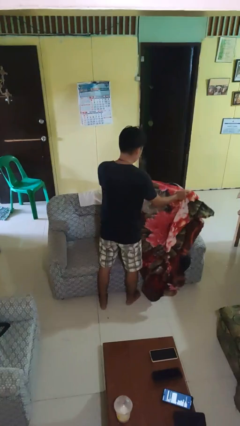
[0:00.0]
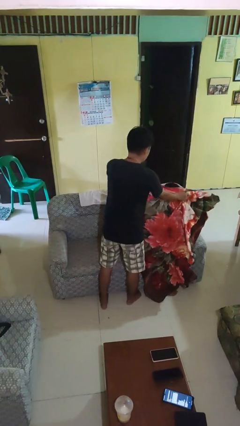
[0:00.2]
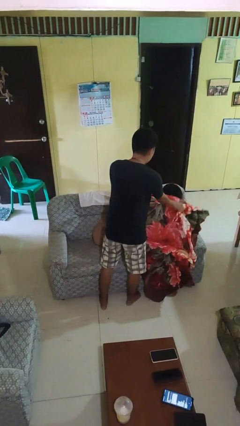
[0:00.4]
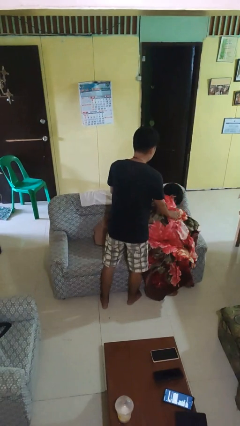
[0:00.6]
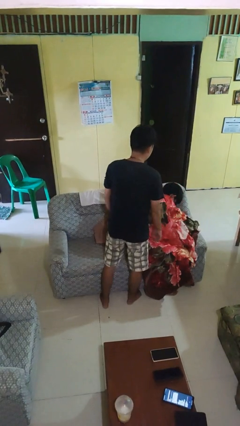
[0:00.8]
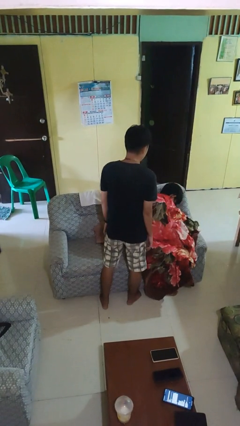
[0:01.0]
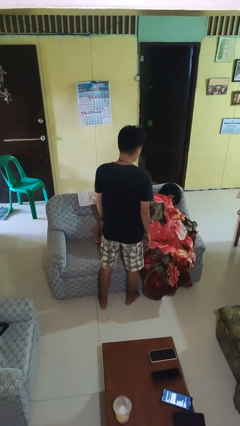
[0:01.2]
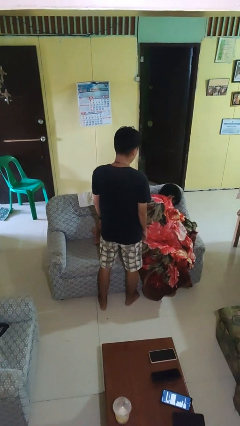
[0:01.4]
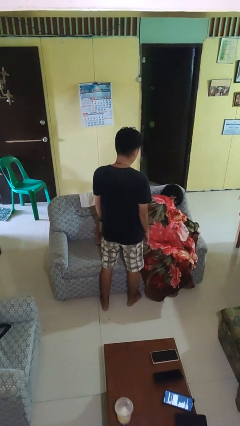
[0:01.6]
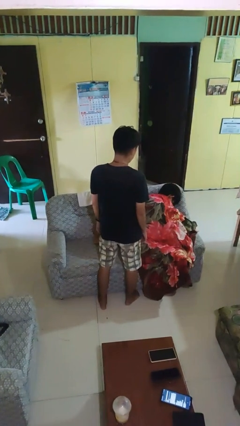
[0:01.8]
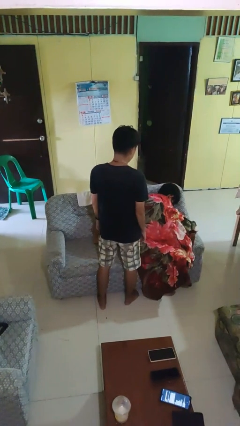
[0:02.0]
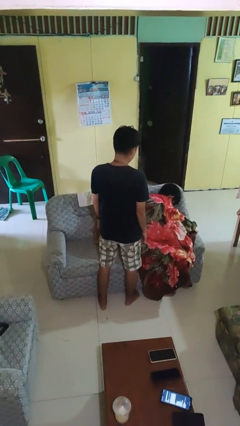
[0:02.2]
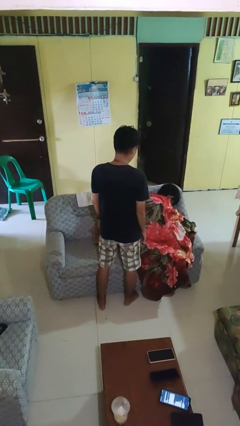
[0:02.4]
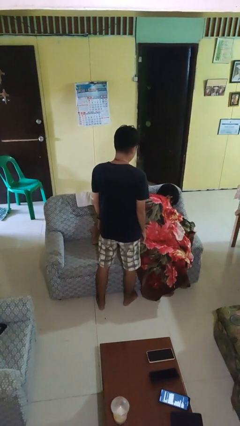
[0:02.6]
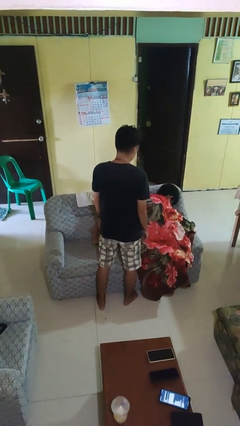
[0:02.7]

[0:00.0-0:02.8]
person covers friend with blanket

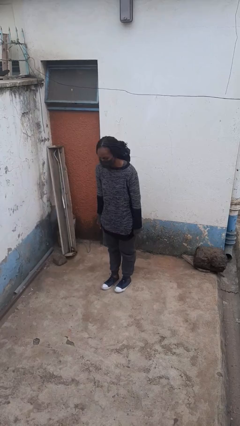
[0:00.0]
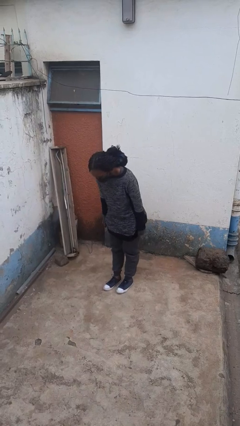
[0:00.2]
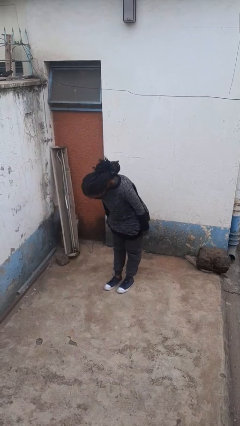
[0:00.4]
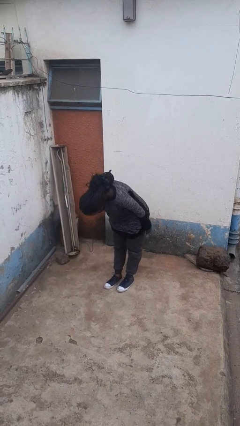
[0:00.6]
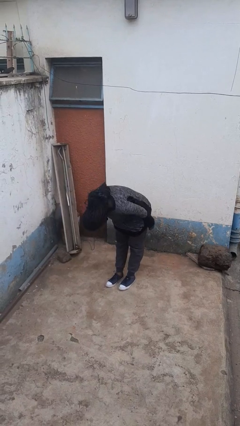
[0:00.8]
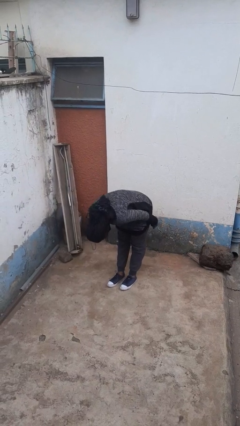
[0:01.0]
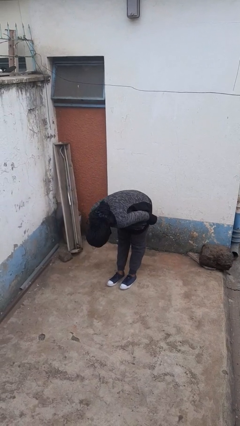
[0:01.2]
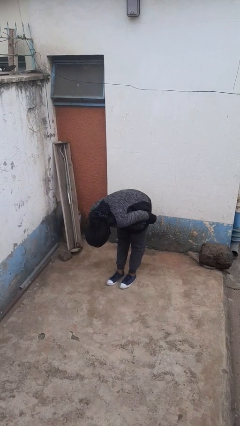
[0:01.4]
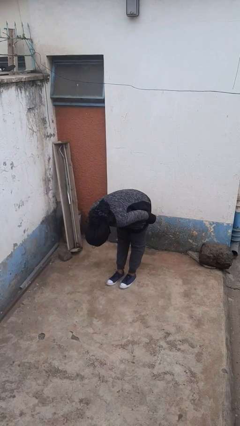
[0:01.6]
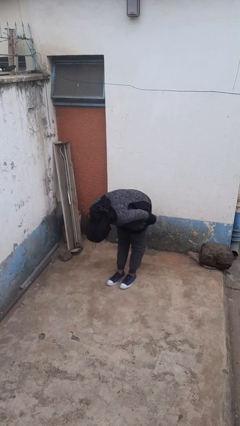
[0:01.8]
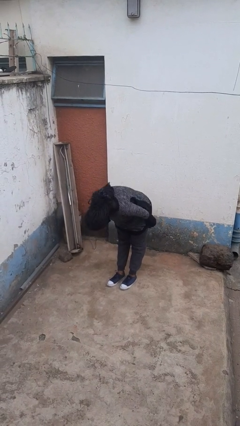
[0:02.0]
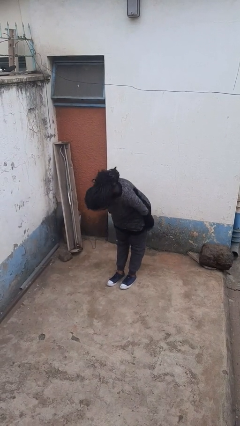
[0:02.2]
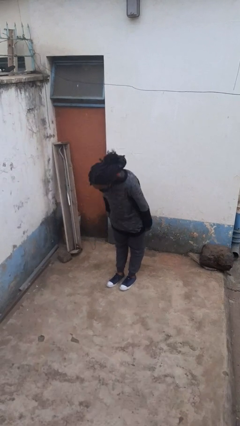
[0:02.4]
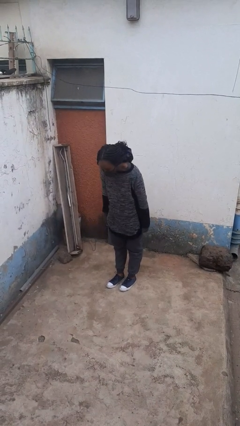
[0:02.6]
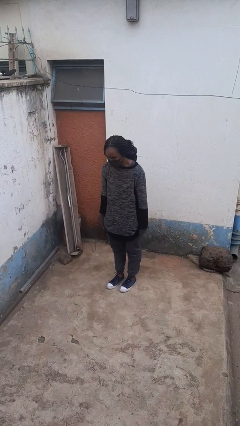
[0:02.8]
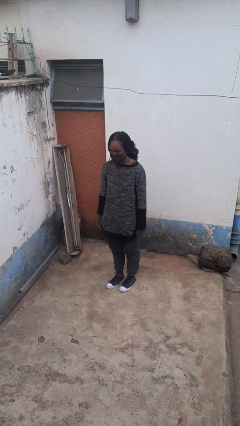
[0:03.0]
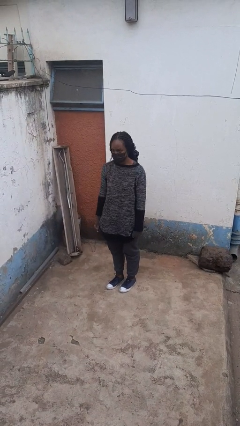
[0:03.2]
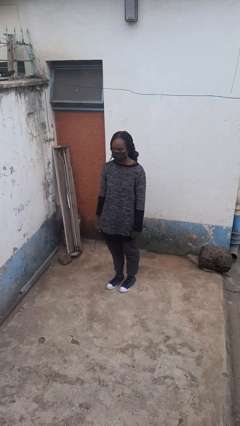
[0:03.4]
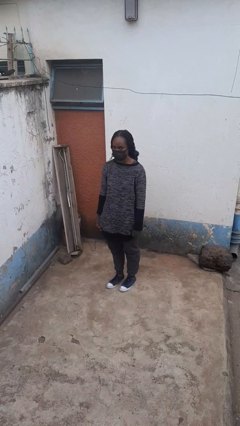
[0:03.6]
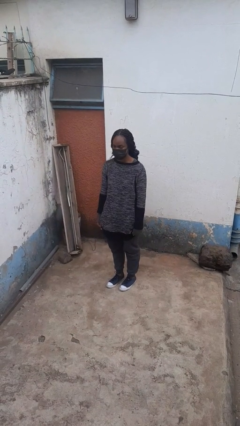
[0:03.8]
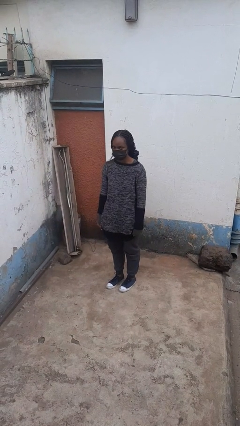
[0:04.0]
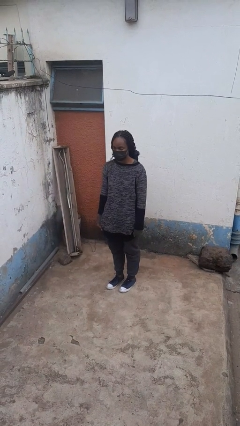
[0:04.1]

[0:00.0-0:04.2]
person bows

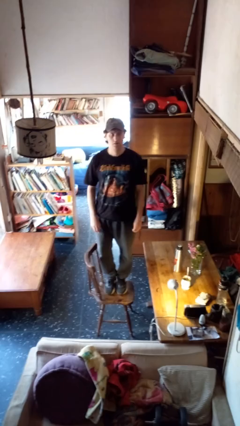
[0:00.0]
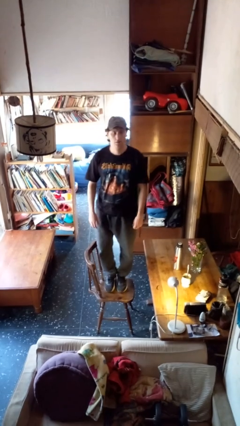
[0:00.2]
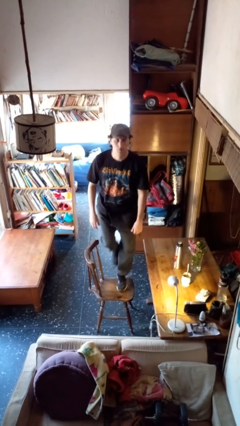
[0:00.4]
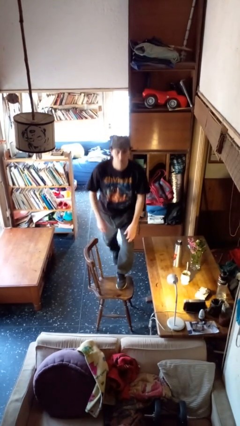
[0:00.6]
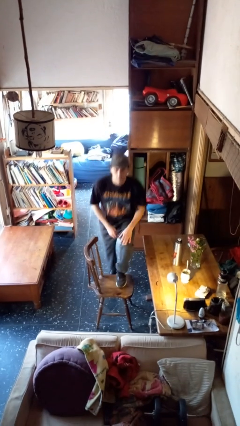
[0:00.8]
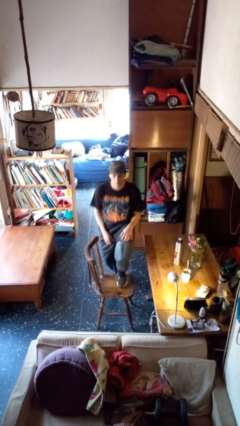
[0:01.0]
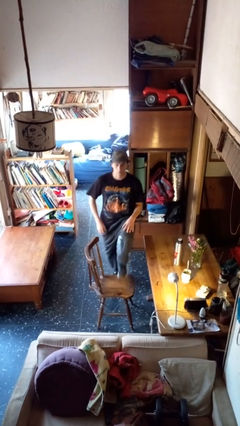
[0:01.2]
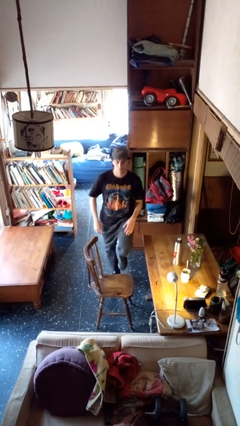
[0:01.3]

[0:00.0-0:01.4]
person climbs off chair

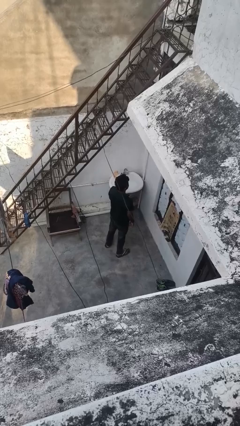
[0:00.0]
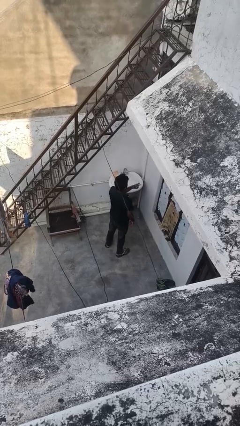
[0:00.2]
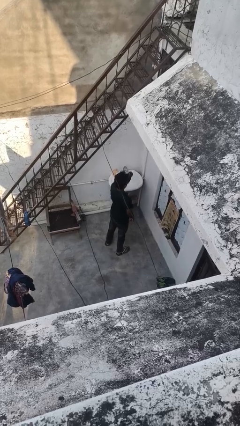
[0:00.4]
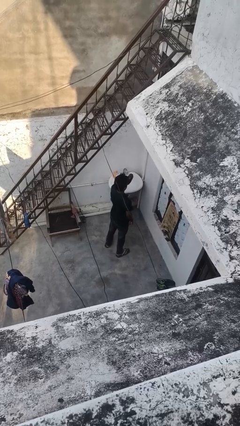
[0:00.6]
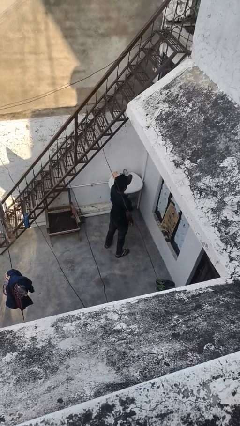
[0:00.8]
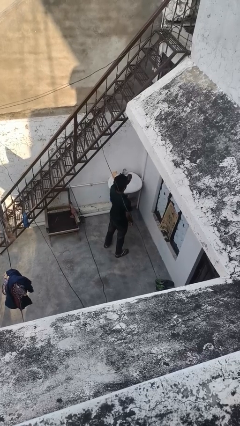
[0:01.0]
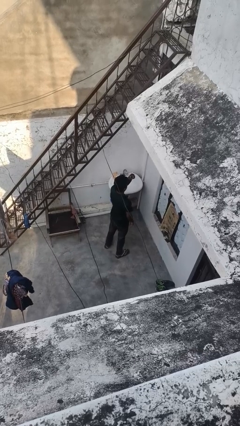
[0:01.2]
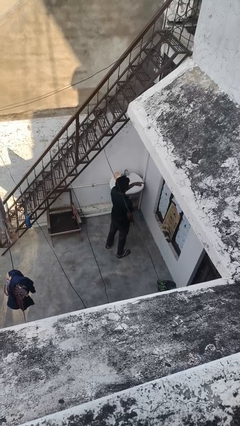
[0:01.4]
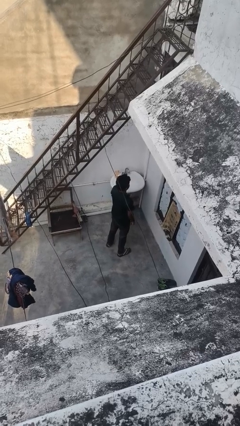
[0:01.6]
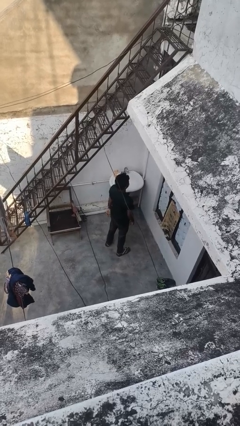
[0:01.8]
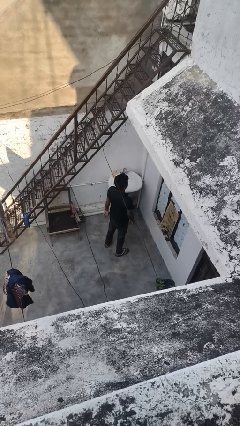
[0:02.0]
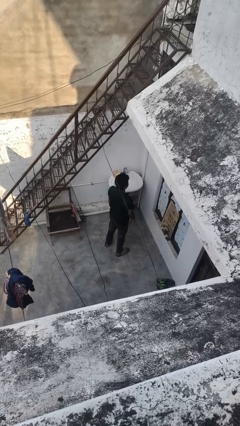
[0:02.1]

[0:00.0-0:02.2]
person gestures watch closely

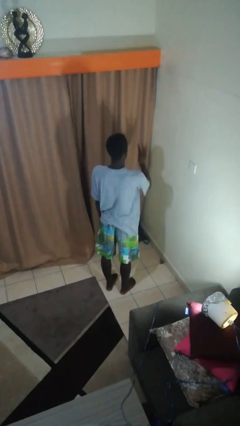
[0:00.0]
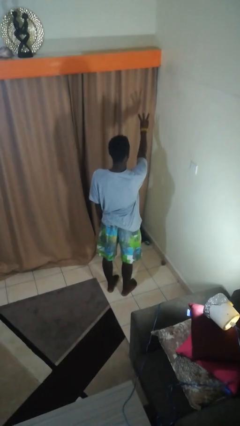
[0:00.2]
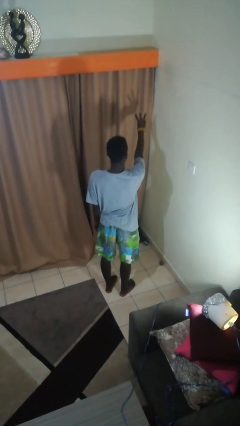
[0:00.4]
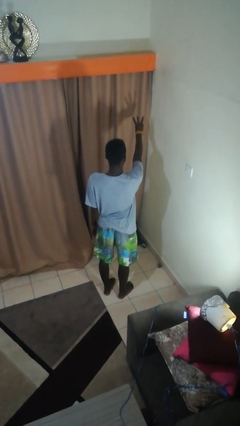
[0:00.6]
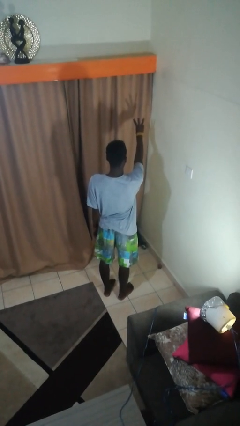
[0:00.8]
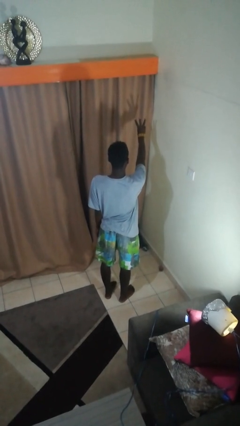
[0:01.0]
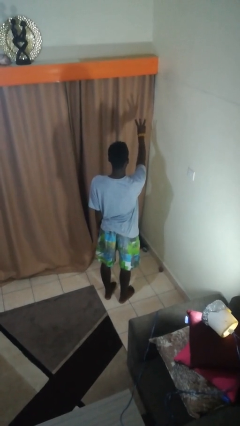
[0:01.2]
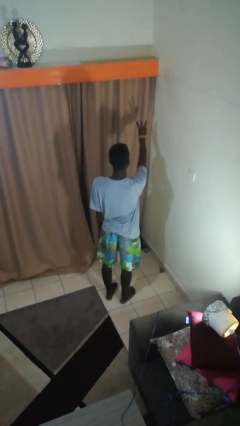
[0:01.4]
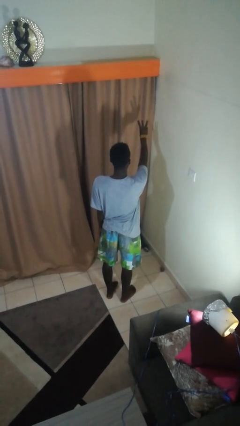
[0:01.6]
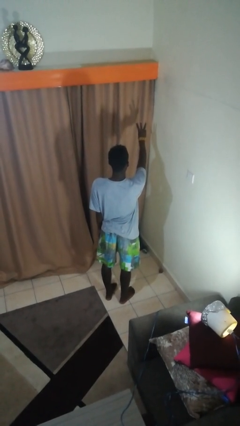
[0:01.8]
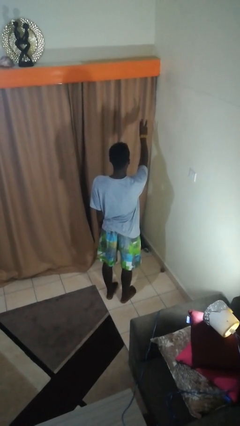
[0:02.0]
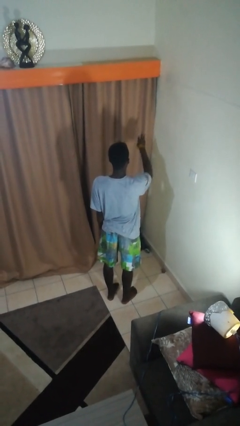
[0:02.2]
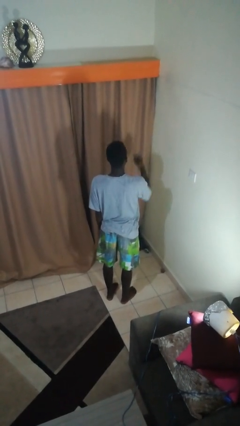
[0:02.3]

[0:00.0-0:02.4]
person gestures number three

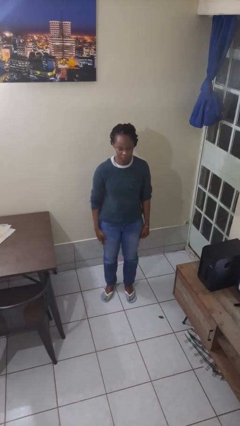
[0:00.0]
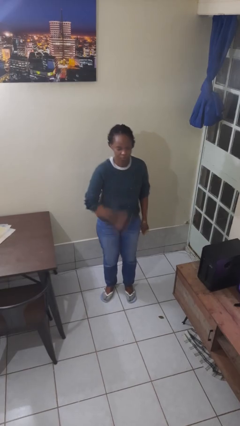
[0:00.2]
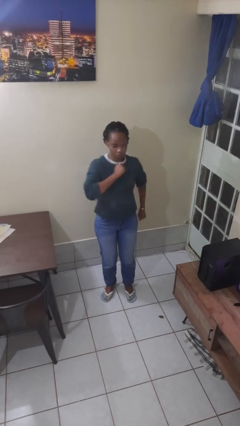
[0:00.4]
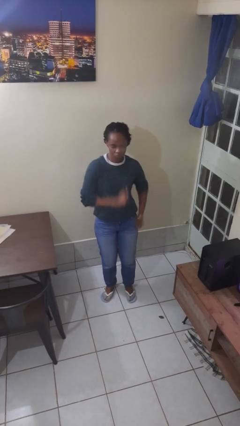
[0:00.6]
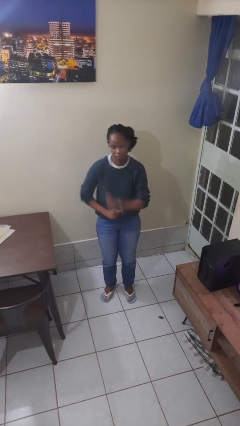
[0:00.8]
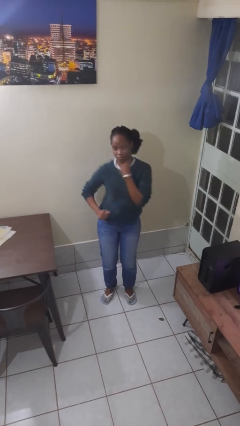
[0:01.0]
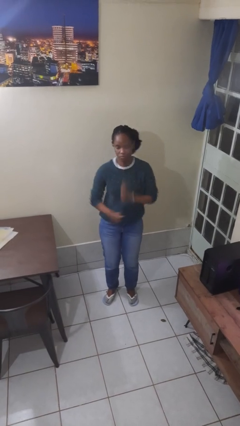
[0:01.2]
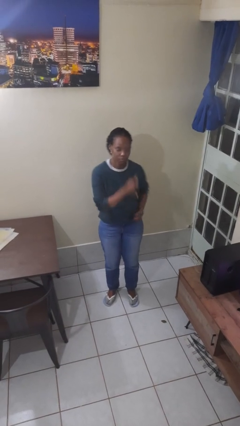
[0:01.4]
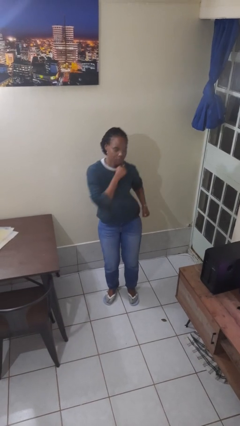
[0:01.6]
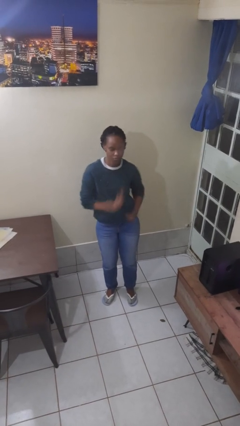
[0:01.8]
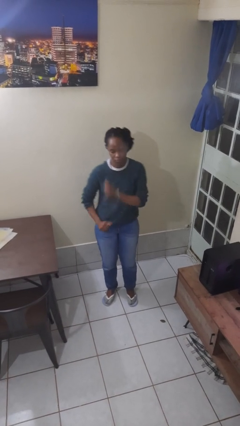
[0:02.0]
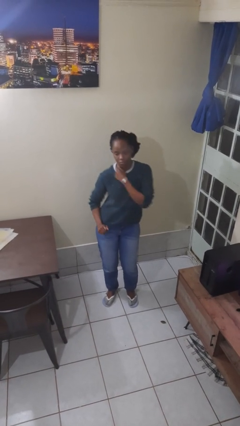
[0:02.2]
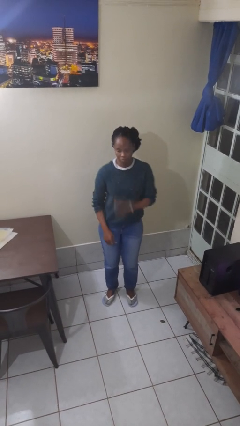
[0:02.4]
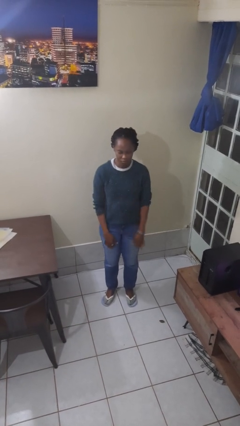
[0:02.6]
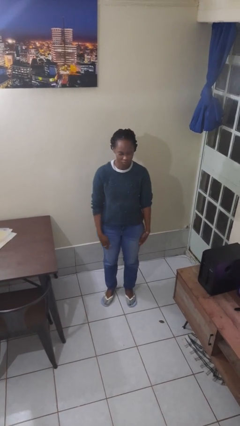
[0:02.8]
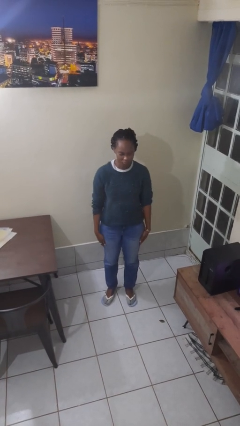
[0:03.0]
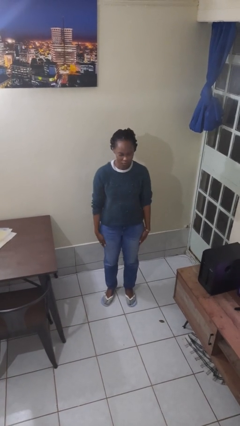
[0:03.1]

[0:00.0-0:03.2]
person dances in place

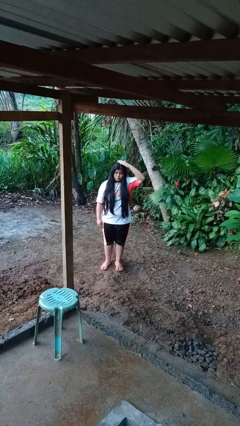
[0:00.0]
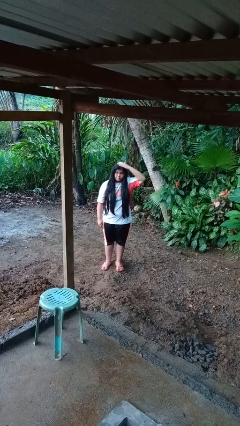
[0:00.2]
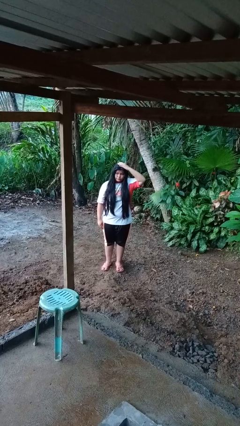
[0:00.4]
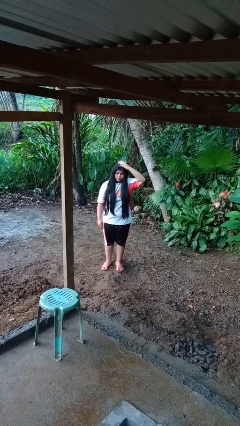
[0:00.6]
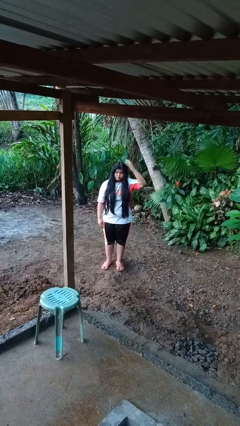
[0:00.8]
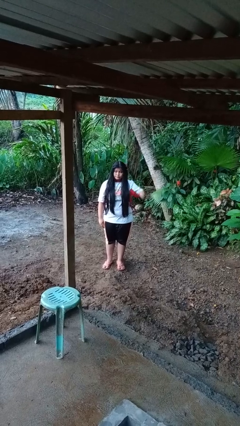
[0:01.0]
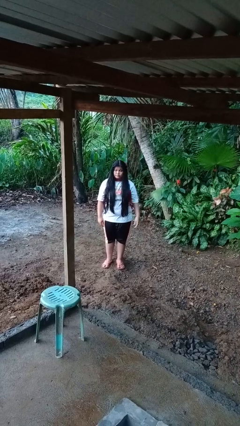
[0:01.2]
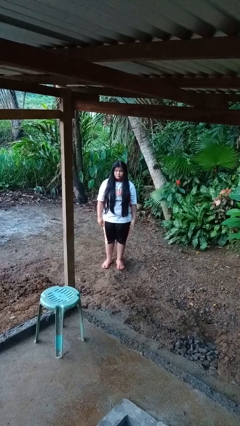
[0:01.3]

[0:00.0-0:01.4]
person pats head
